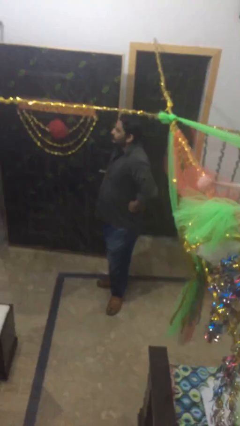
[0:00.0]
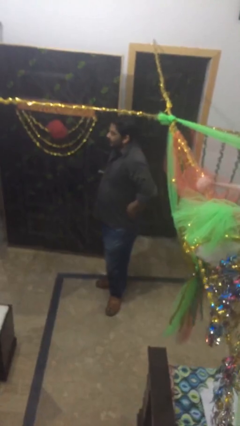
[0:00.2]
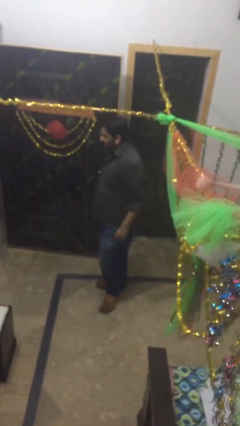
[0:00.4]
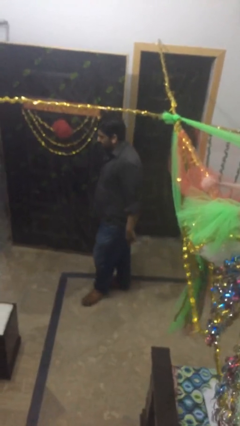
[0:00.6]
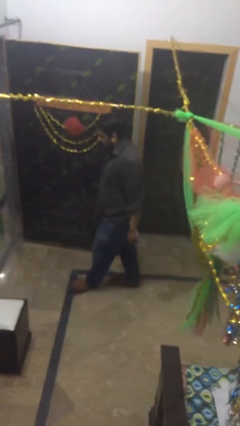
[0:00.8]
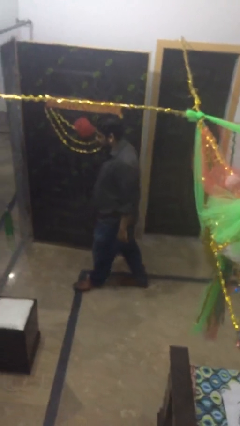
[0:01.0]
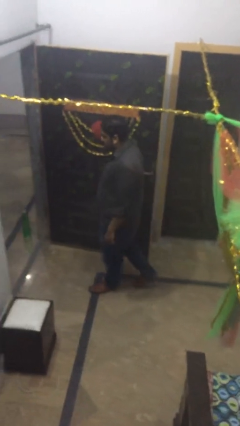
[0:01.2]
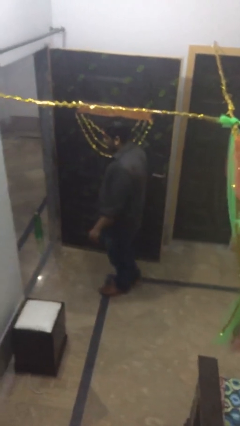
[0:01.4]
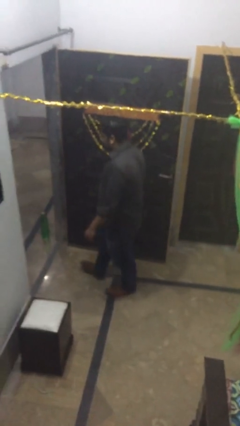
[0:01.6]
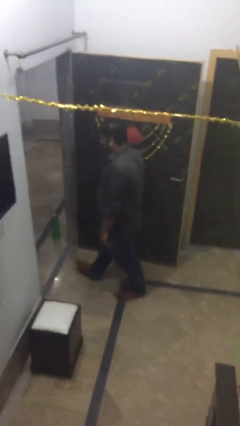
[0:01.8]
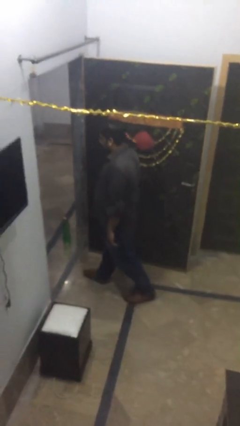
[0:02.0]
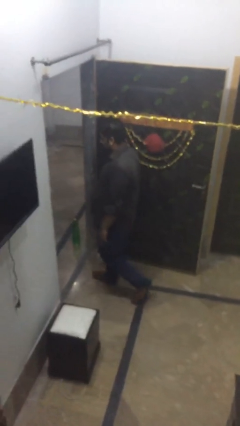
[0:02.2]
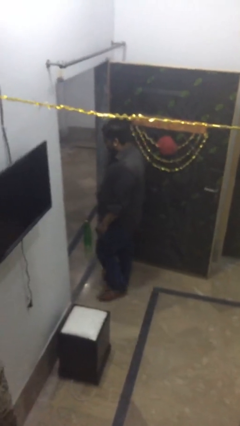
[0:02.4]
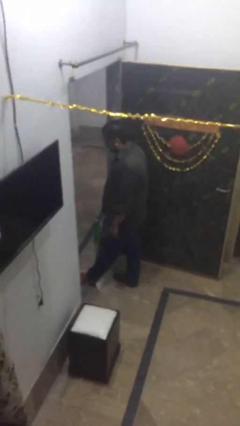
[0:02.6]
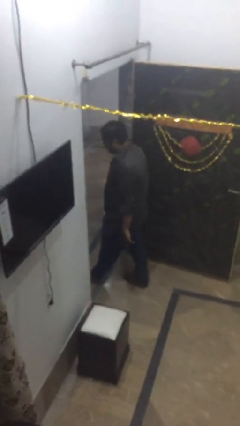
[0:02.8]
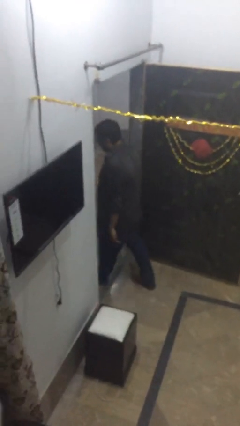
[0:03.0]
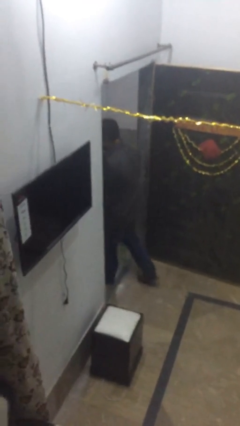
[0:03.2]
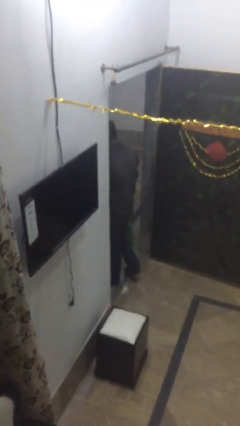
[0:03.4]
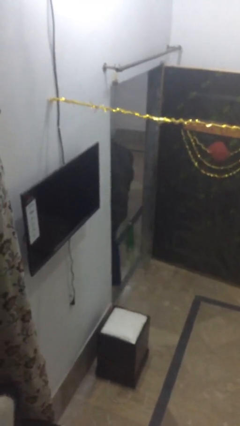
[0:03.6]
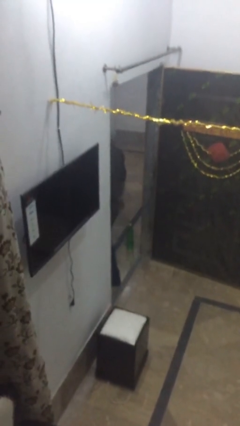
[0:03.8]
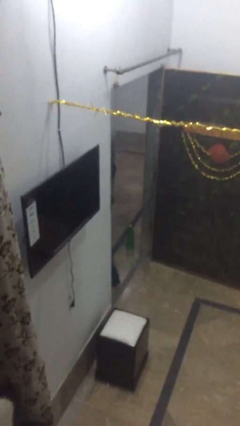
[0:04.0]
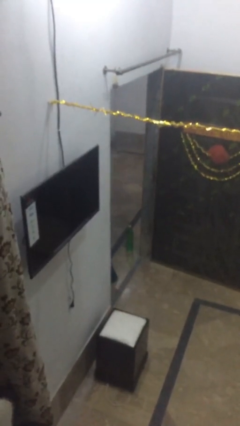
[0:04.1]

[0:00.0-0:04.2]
person exits scene through structure

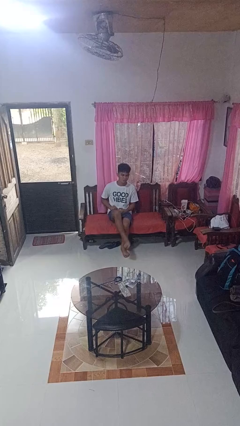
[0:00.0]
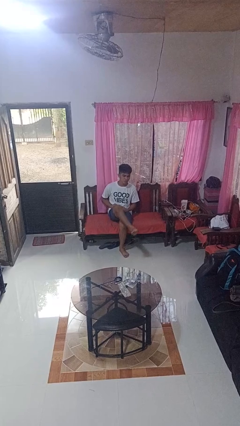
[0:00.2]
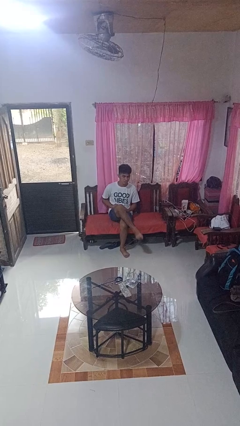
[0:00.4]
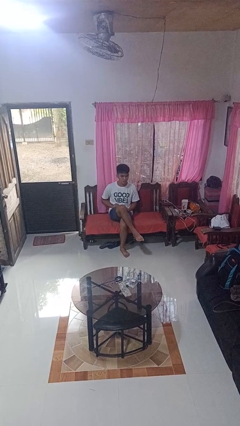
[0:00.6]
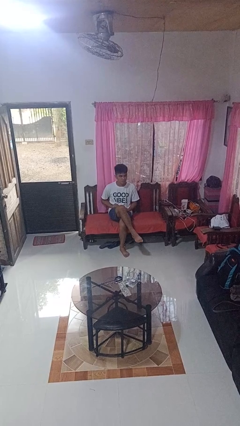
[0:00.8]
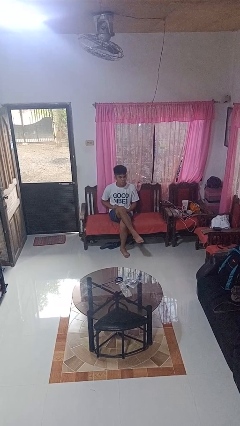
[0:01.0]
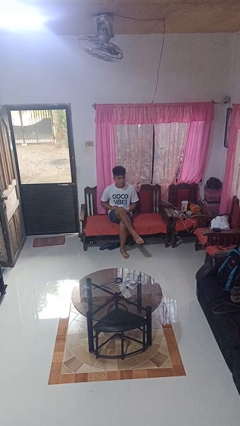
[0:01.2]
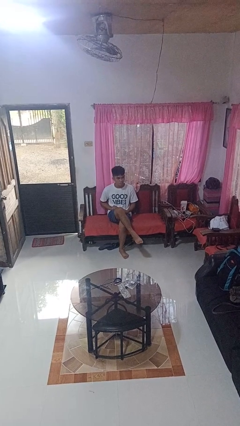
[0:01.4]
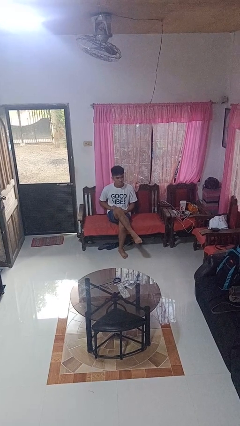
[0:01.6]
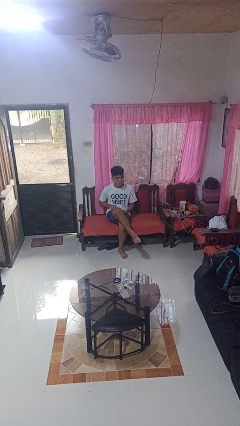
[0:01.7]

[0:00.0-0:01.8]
person crosses legs

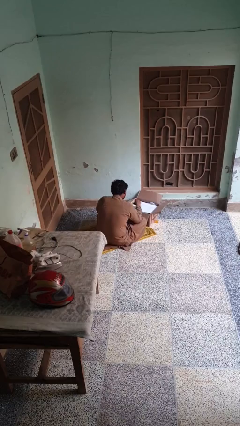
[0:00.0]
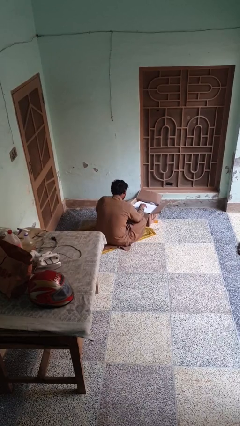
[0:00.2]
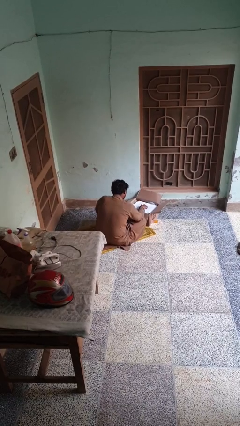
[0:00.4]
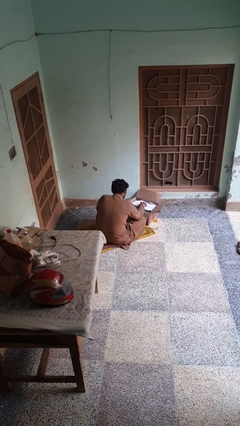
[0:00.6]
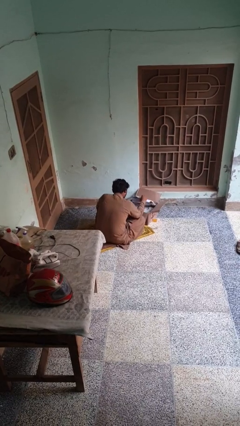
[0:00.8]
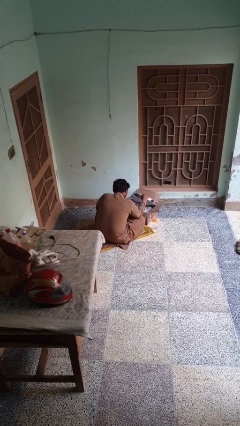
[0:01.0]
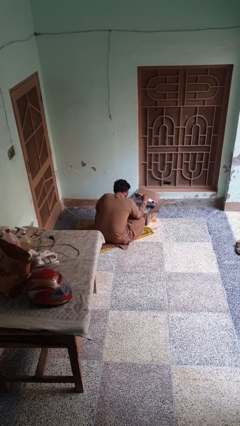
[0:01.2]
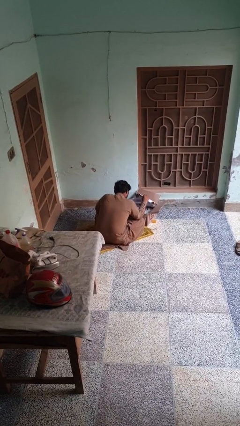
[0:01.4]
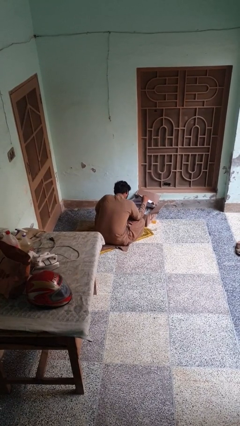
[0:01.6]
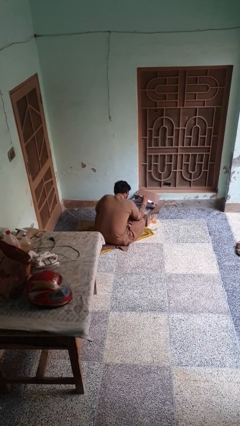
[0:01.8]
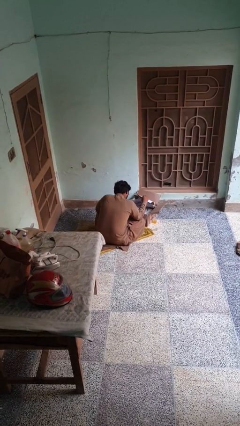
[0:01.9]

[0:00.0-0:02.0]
person searches in box

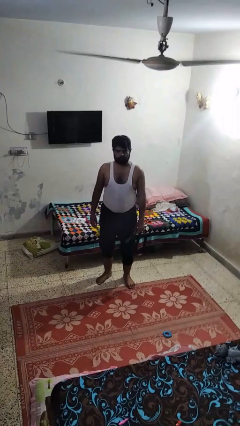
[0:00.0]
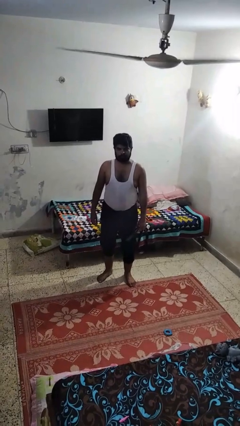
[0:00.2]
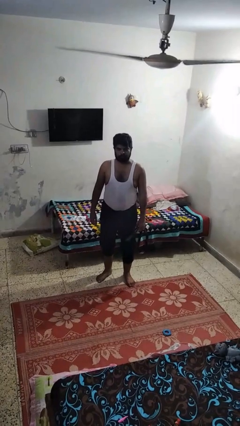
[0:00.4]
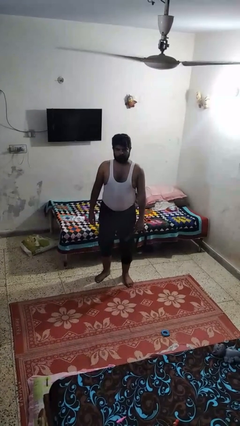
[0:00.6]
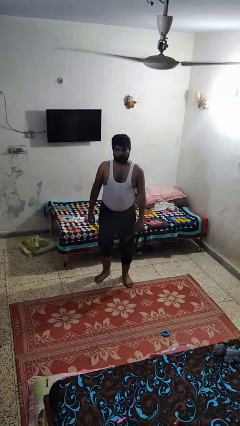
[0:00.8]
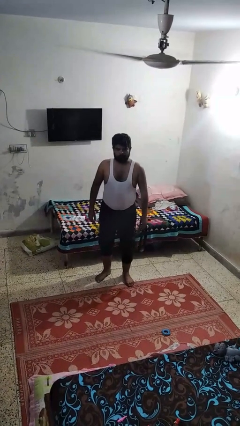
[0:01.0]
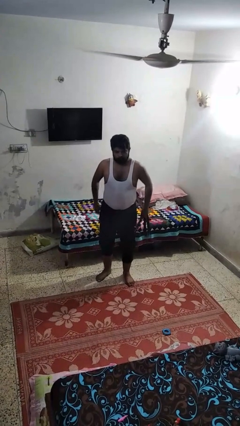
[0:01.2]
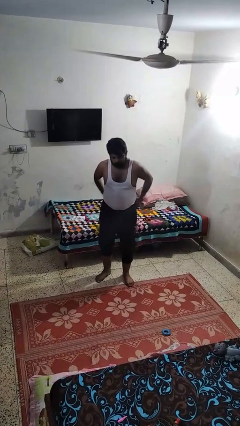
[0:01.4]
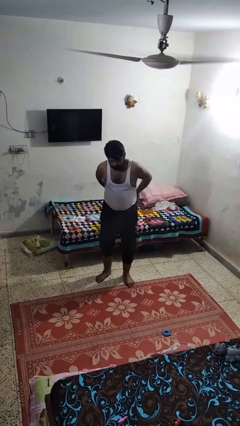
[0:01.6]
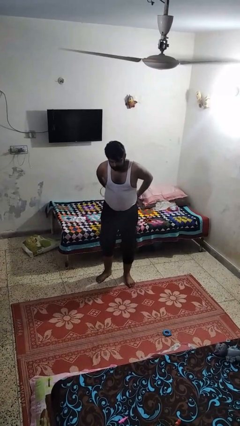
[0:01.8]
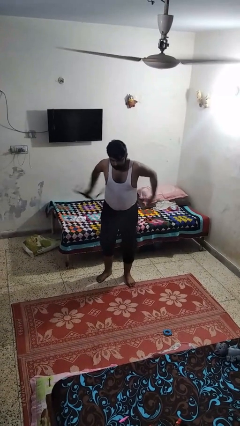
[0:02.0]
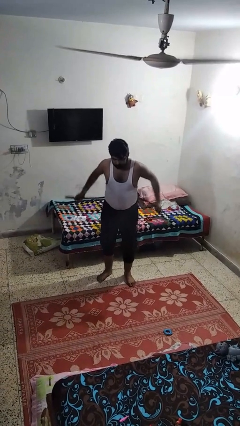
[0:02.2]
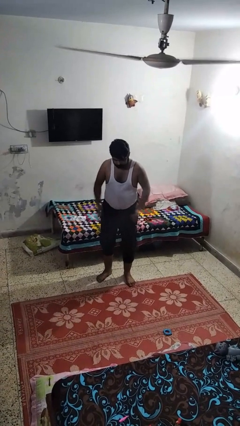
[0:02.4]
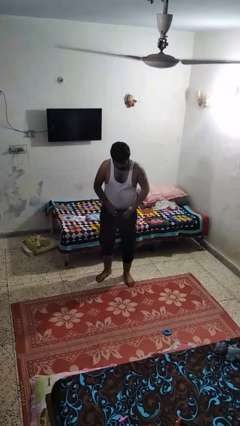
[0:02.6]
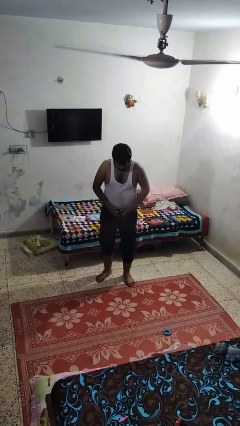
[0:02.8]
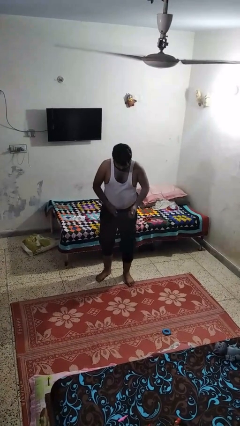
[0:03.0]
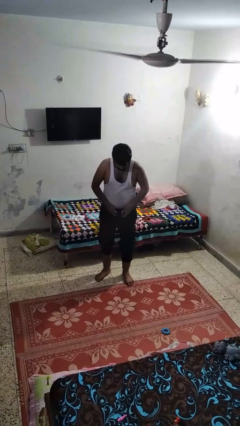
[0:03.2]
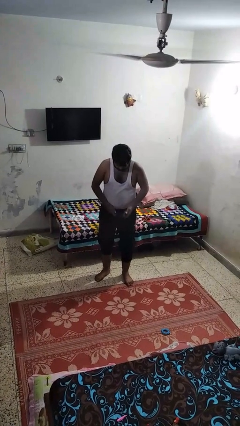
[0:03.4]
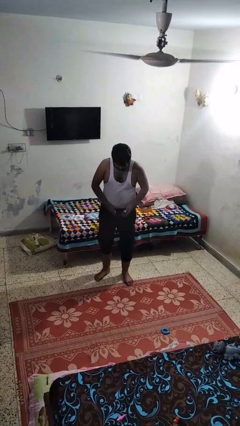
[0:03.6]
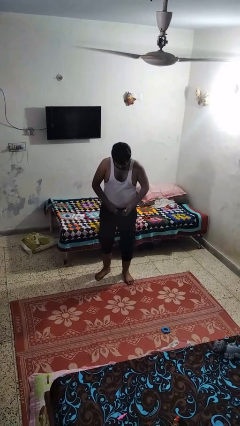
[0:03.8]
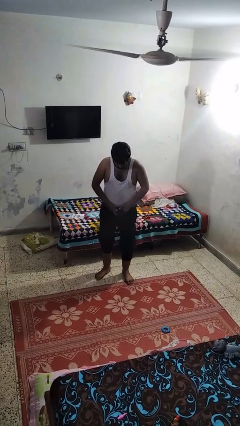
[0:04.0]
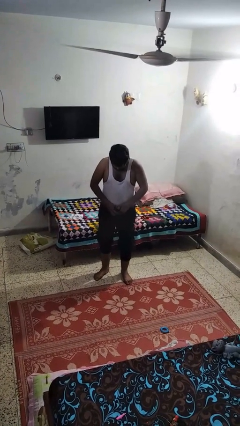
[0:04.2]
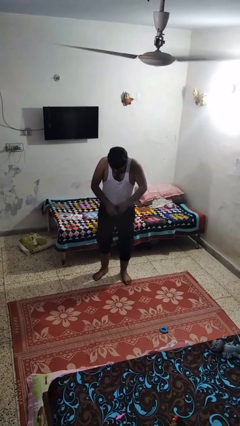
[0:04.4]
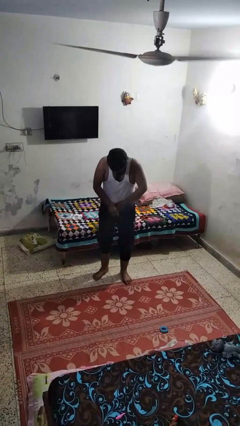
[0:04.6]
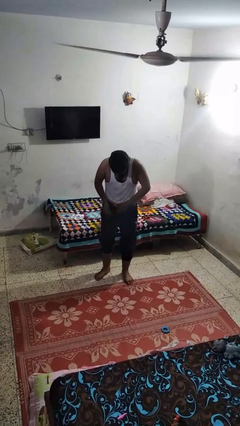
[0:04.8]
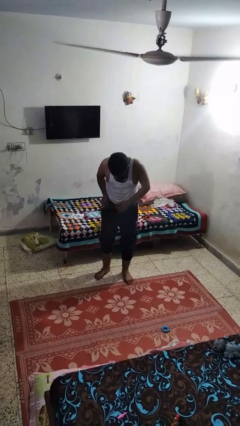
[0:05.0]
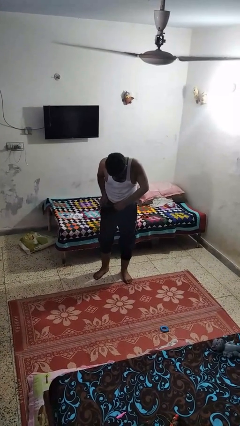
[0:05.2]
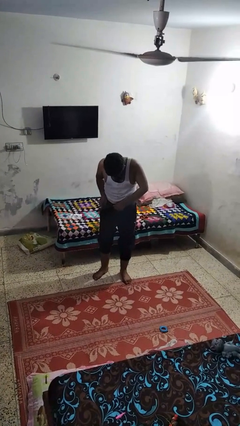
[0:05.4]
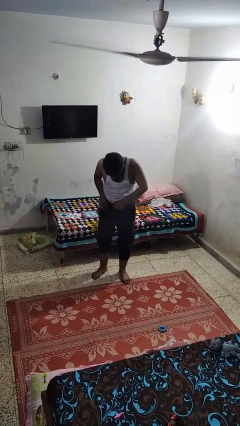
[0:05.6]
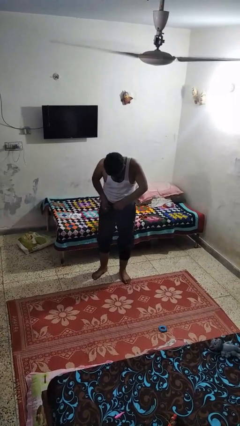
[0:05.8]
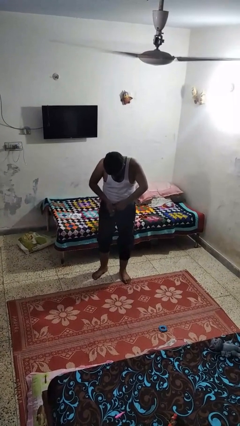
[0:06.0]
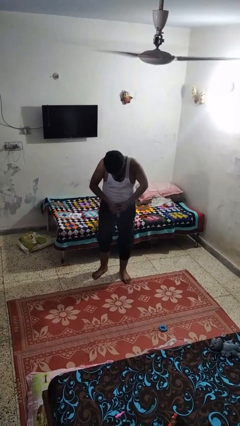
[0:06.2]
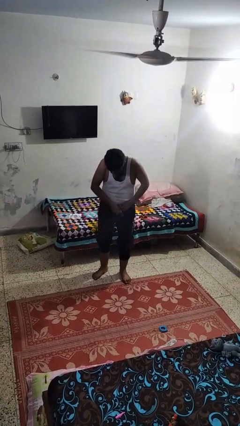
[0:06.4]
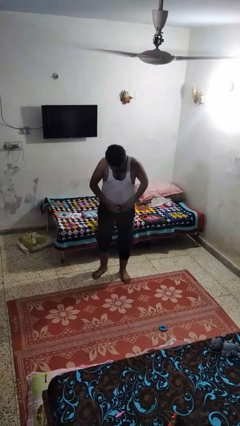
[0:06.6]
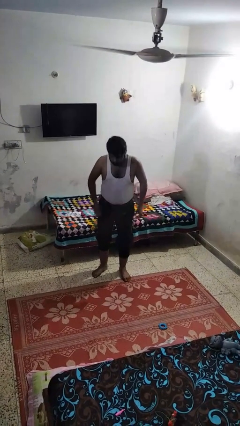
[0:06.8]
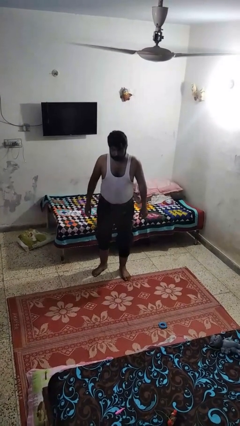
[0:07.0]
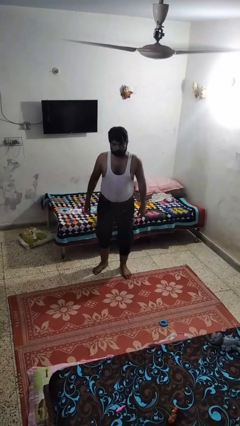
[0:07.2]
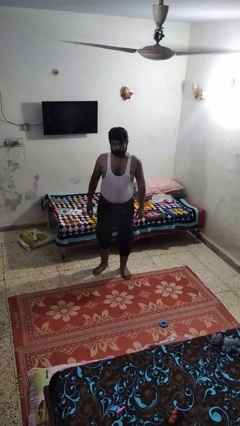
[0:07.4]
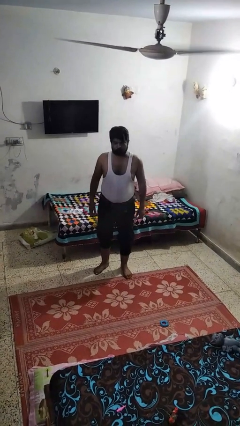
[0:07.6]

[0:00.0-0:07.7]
person puts on belt

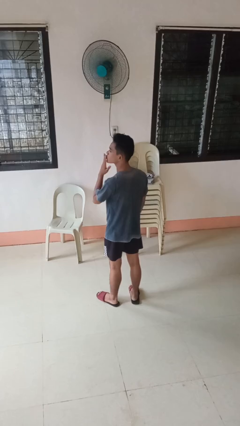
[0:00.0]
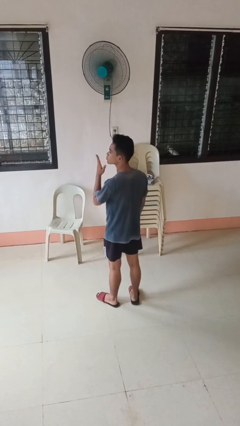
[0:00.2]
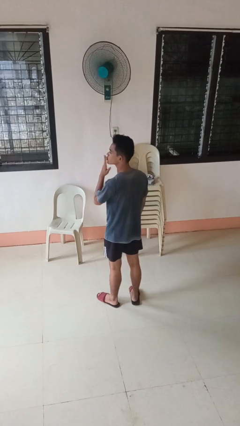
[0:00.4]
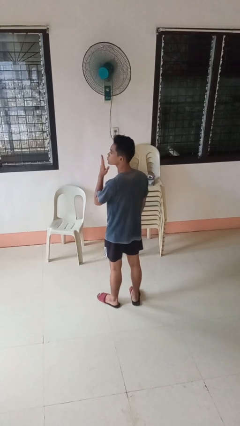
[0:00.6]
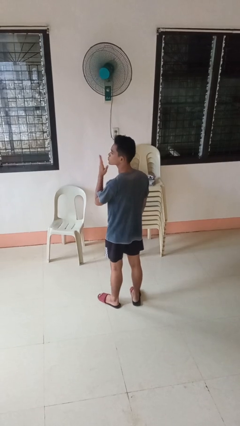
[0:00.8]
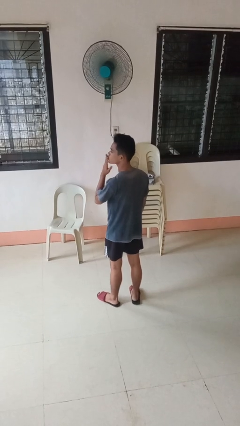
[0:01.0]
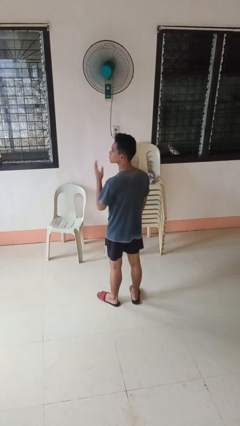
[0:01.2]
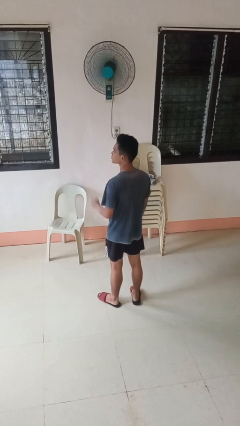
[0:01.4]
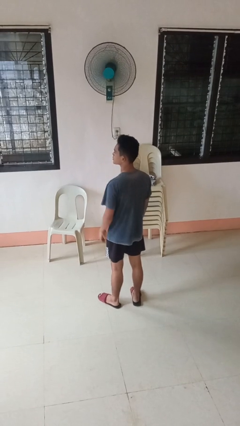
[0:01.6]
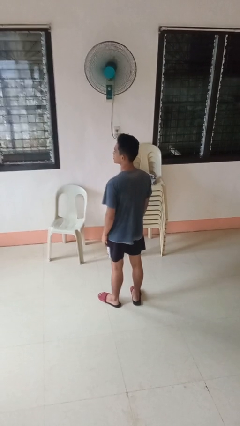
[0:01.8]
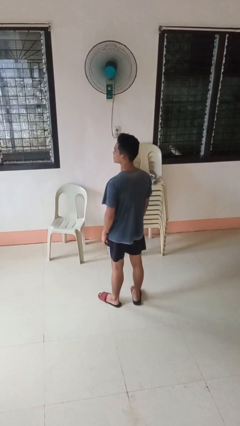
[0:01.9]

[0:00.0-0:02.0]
person gestures blow kiss
